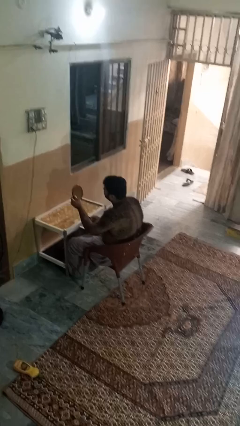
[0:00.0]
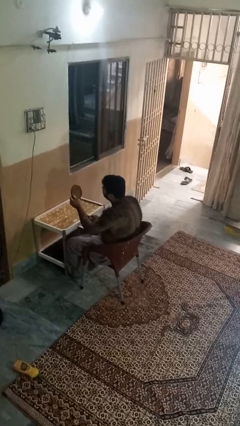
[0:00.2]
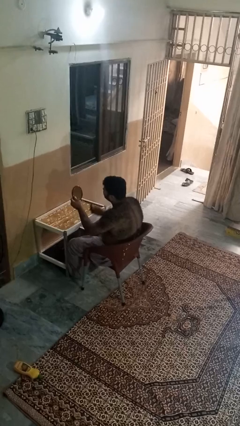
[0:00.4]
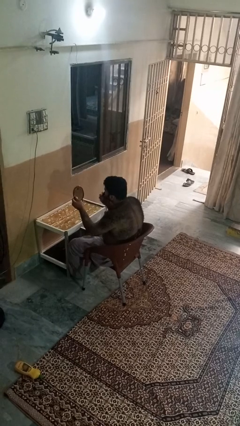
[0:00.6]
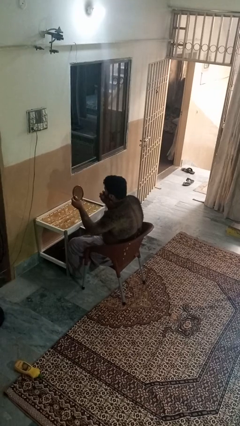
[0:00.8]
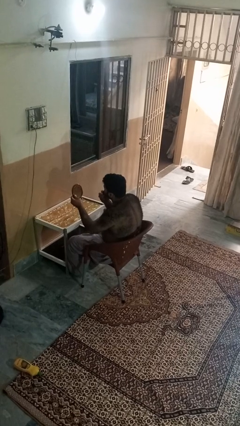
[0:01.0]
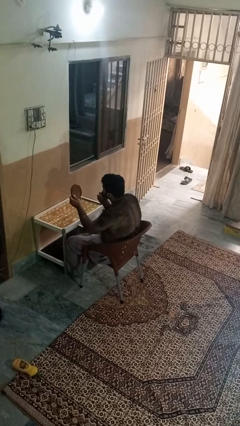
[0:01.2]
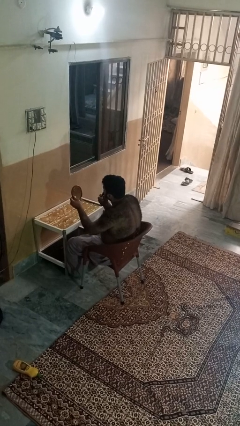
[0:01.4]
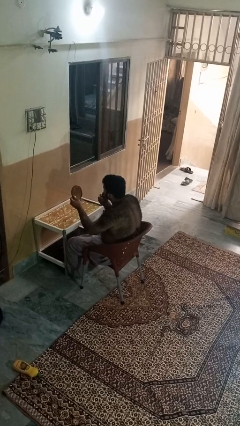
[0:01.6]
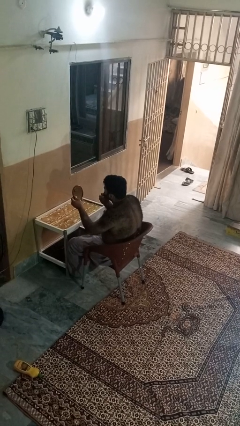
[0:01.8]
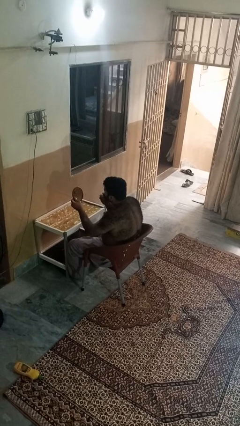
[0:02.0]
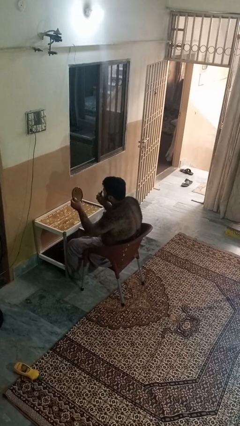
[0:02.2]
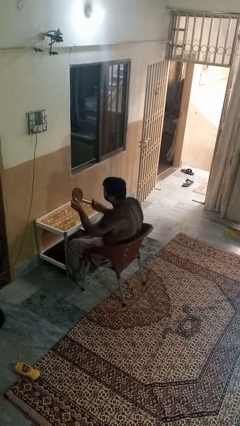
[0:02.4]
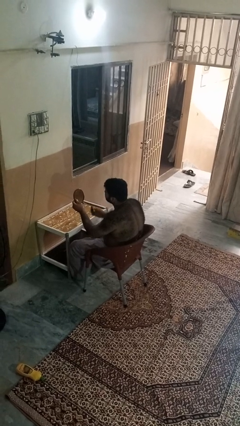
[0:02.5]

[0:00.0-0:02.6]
person applies lip makeup

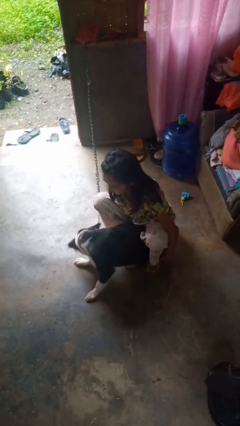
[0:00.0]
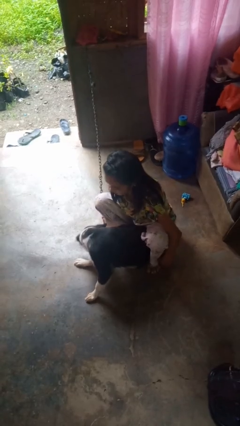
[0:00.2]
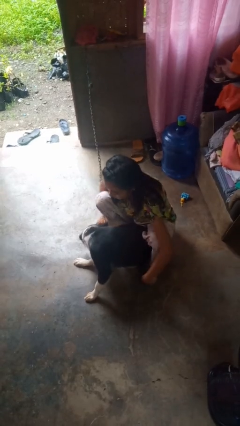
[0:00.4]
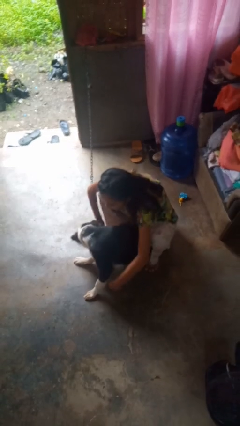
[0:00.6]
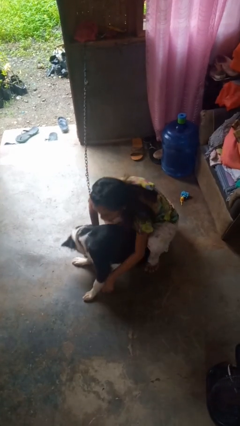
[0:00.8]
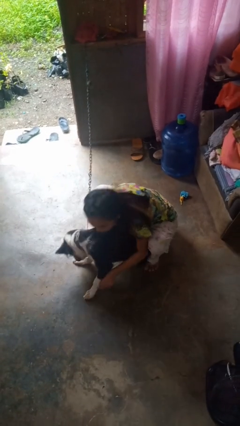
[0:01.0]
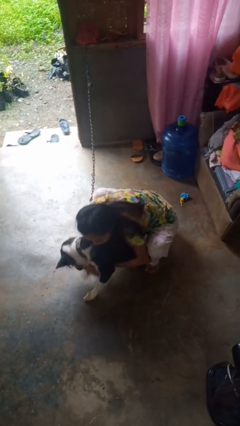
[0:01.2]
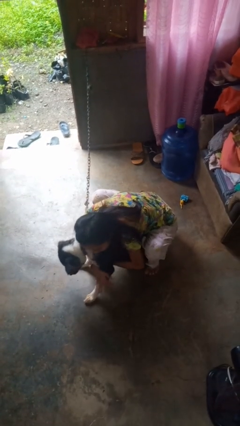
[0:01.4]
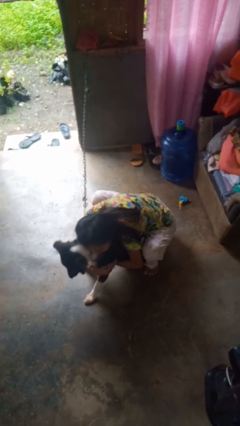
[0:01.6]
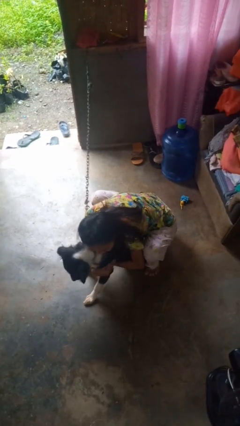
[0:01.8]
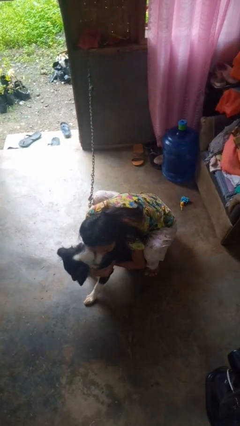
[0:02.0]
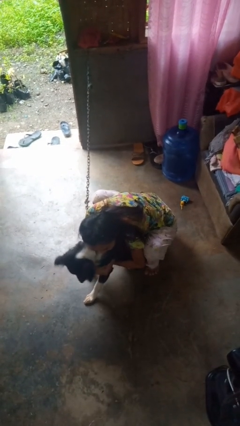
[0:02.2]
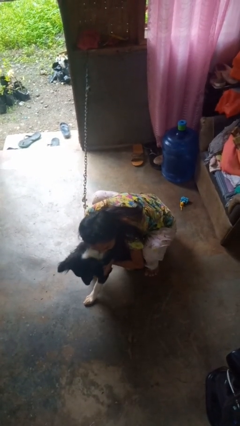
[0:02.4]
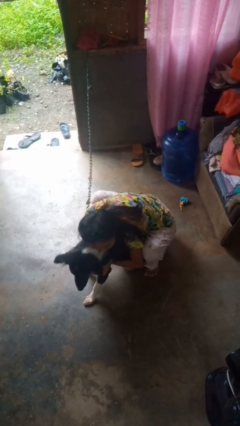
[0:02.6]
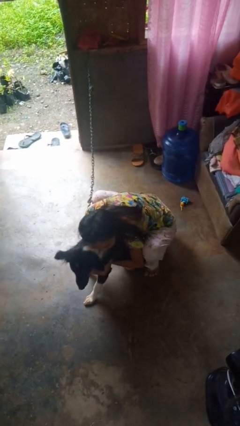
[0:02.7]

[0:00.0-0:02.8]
person hugs dog

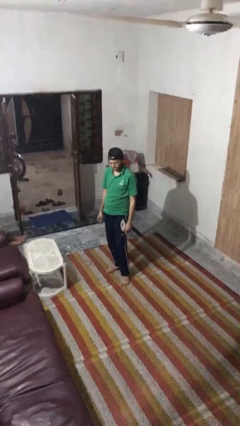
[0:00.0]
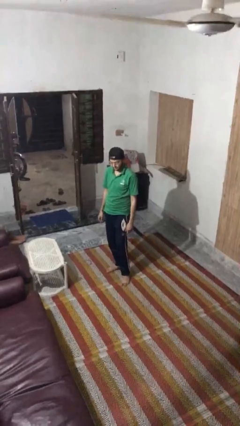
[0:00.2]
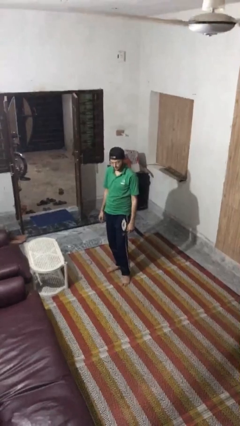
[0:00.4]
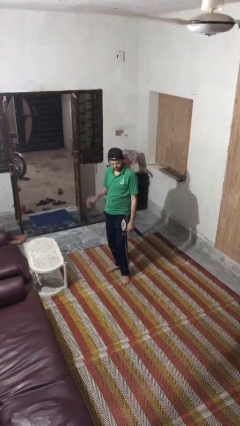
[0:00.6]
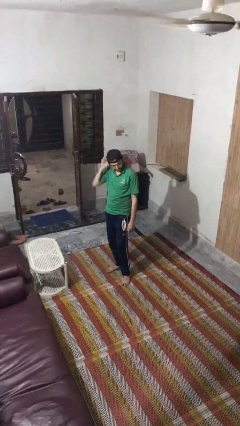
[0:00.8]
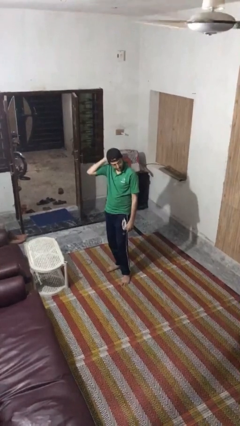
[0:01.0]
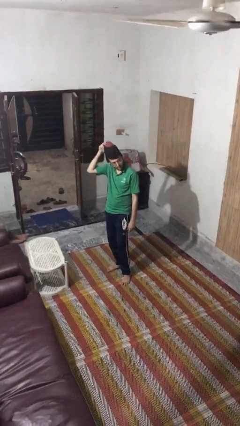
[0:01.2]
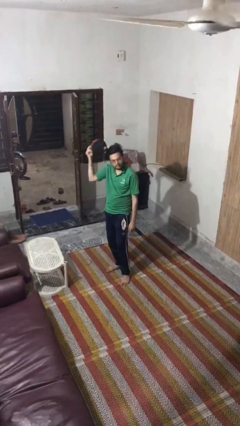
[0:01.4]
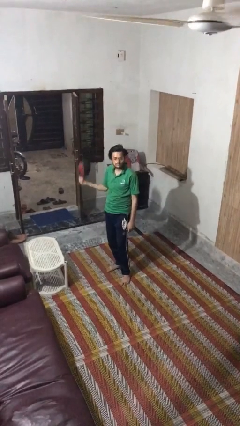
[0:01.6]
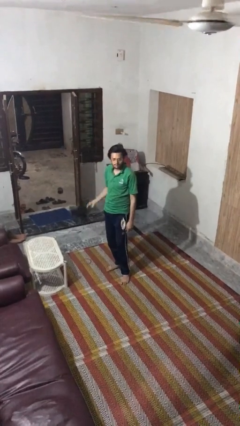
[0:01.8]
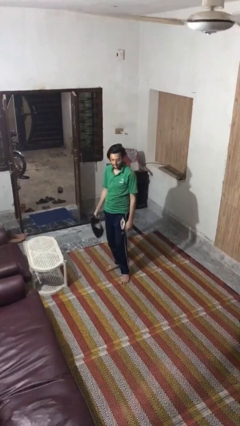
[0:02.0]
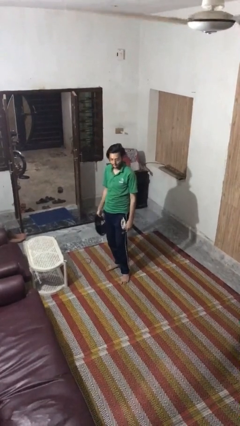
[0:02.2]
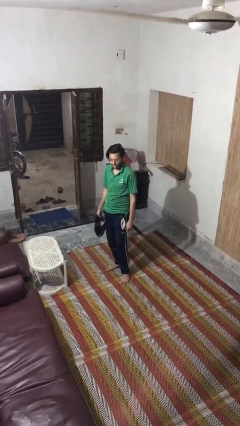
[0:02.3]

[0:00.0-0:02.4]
person takes off hat

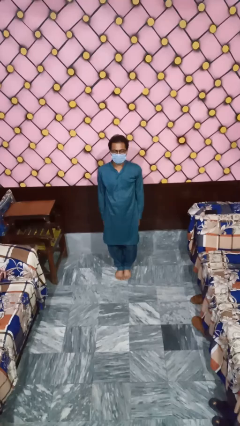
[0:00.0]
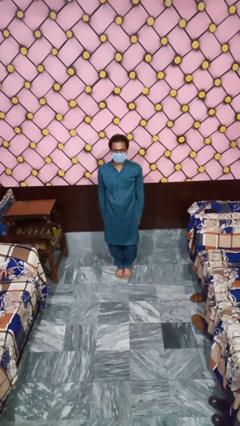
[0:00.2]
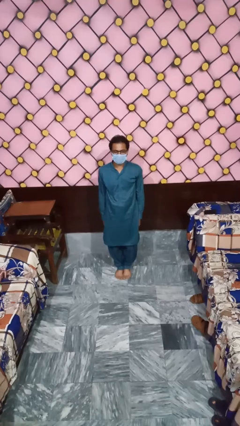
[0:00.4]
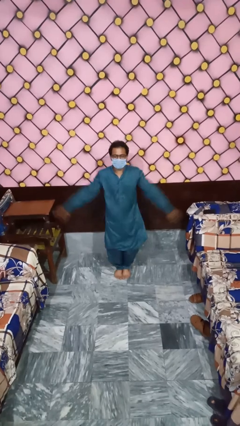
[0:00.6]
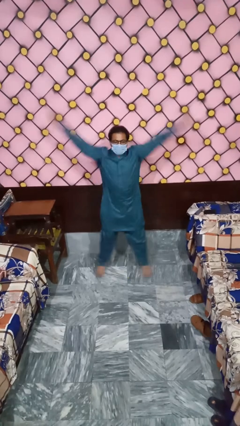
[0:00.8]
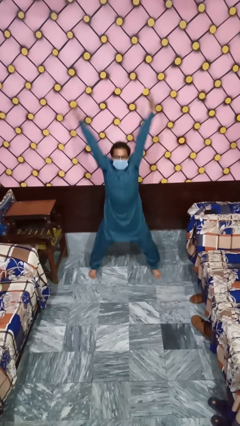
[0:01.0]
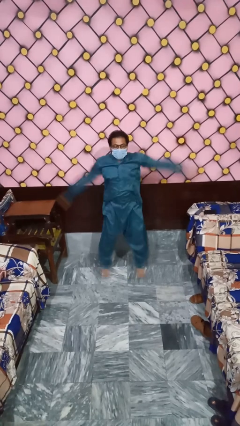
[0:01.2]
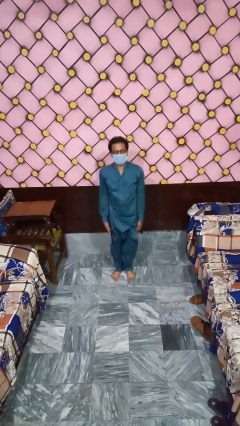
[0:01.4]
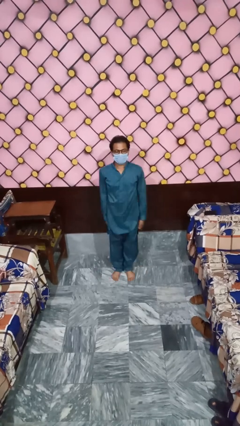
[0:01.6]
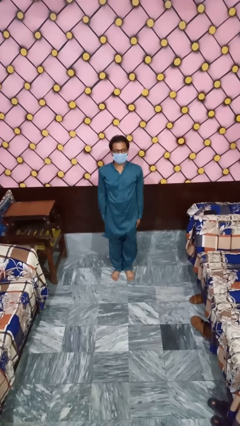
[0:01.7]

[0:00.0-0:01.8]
person exercises with jumping jacks

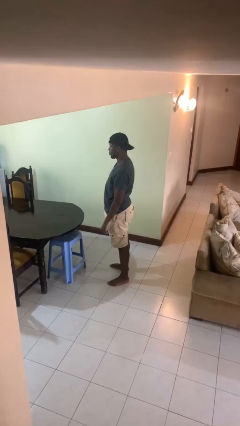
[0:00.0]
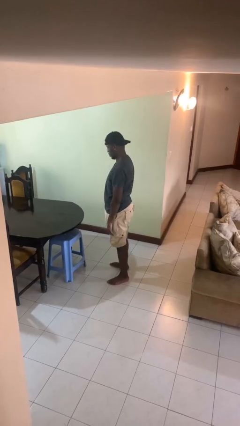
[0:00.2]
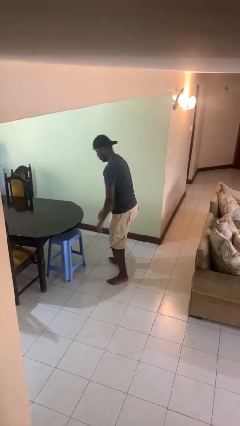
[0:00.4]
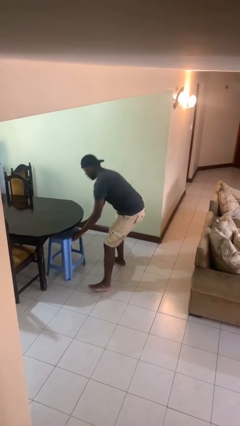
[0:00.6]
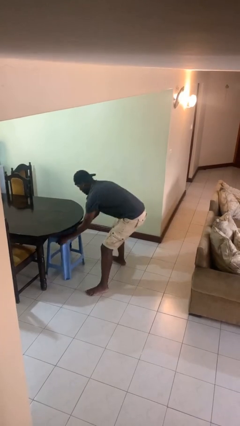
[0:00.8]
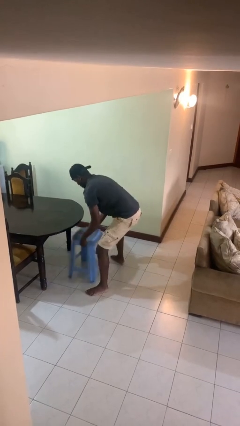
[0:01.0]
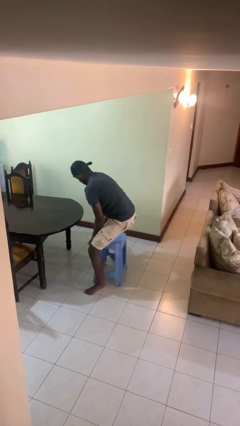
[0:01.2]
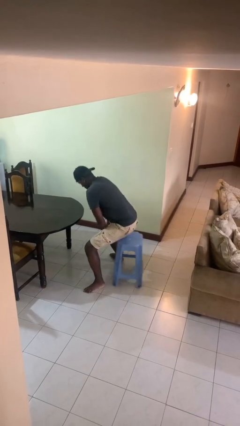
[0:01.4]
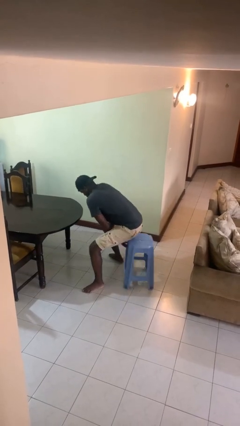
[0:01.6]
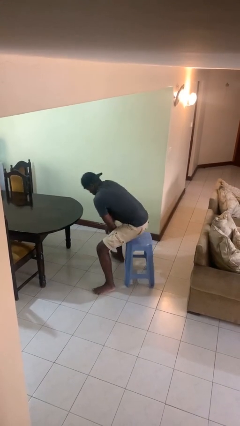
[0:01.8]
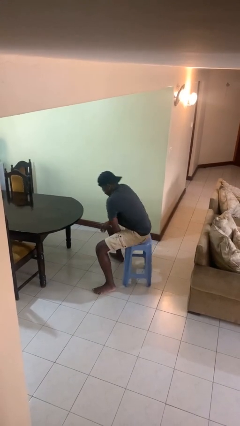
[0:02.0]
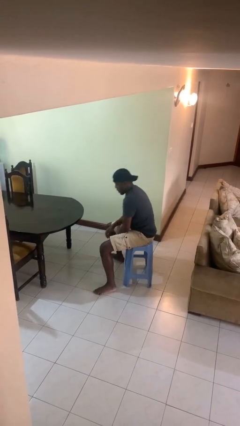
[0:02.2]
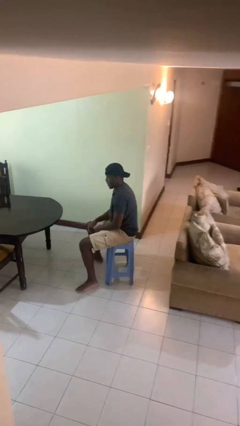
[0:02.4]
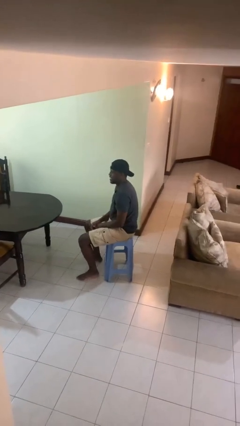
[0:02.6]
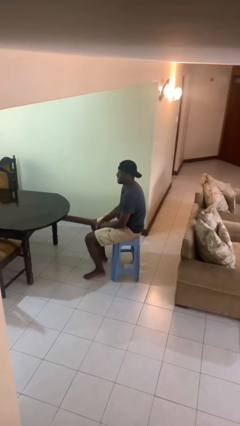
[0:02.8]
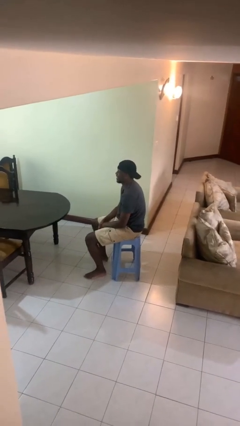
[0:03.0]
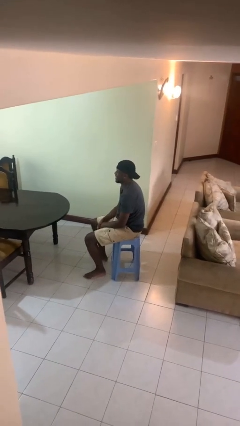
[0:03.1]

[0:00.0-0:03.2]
person sits down

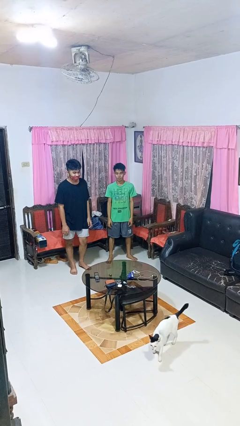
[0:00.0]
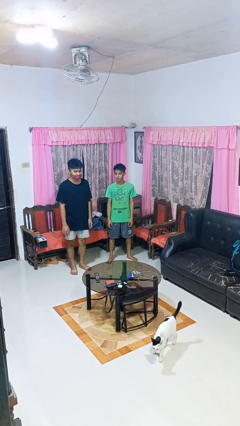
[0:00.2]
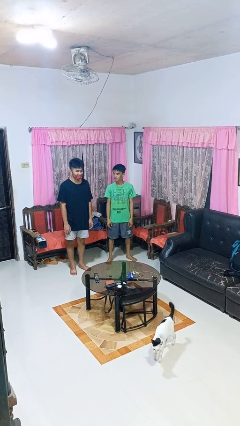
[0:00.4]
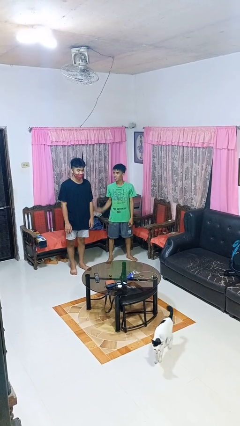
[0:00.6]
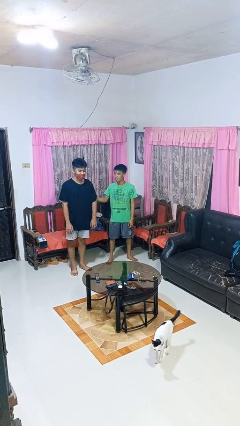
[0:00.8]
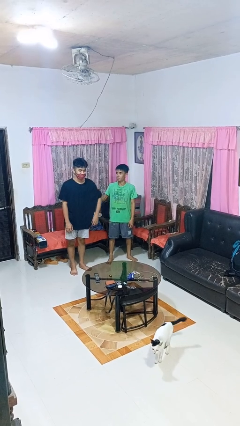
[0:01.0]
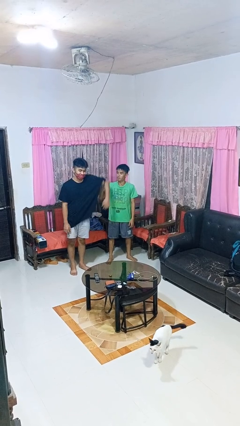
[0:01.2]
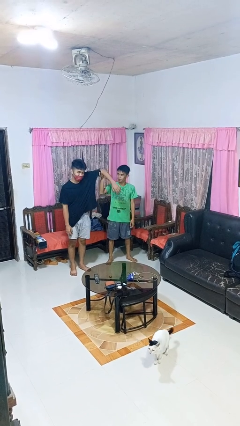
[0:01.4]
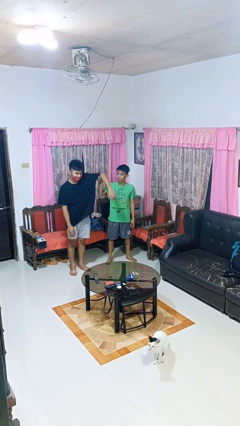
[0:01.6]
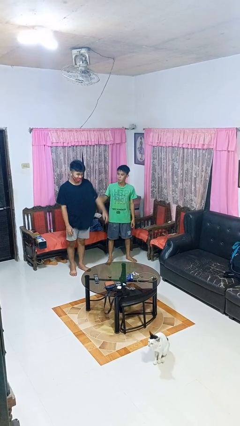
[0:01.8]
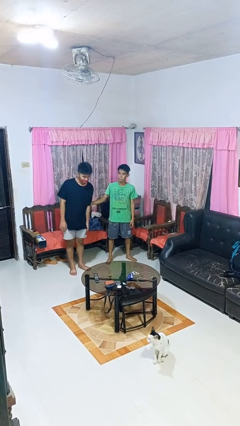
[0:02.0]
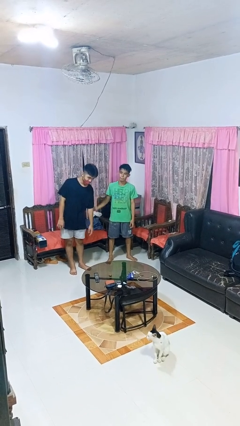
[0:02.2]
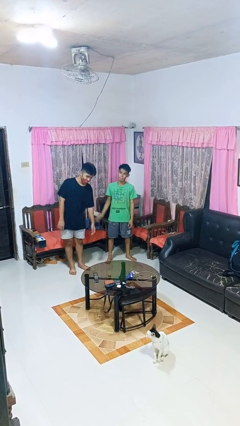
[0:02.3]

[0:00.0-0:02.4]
person grabs person by bicep

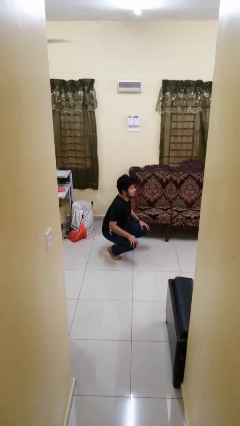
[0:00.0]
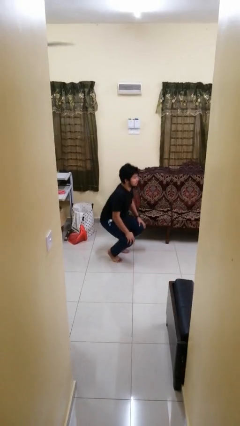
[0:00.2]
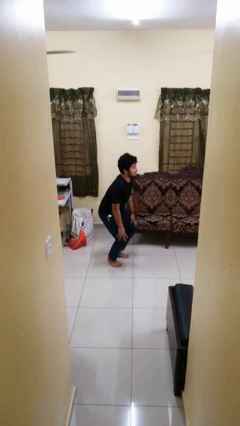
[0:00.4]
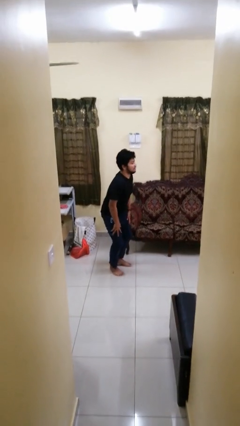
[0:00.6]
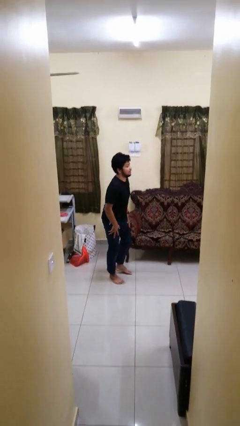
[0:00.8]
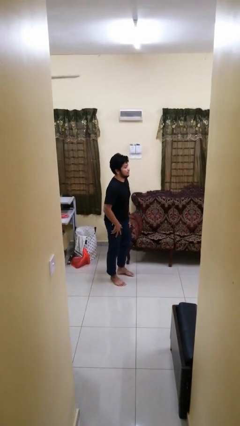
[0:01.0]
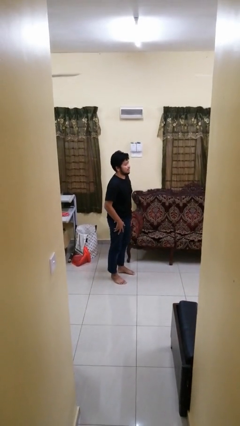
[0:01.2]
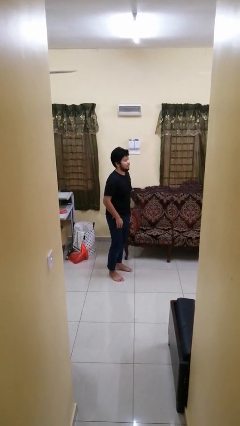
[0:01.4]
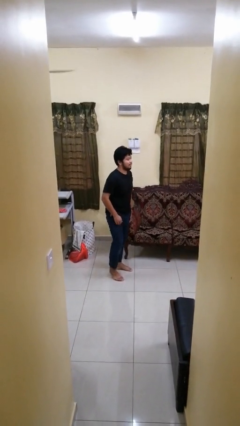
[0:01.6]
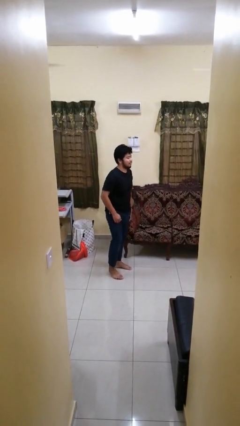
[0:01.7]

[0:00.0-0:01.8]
person stands up
